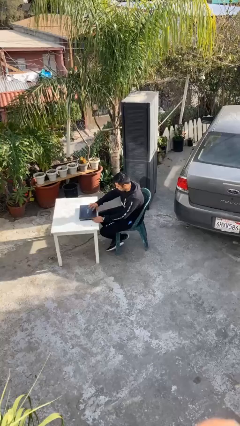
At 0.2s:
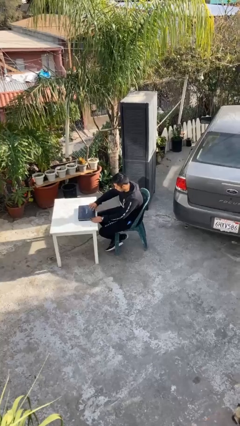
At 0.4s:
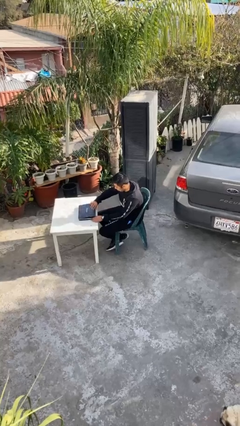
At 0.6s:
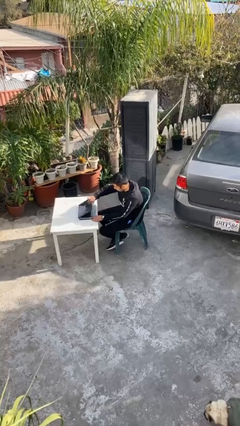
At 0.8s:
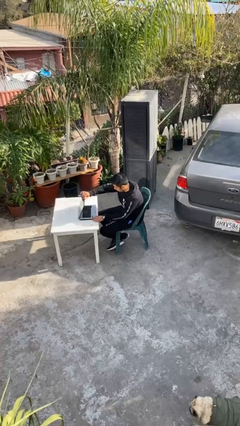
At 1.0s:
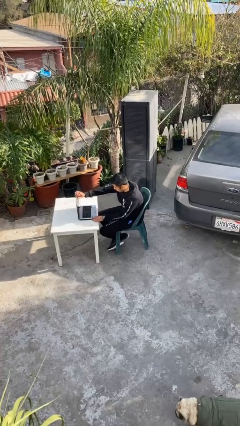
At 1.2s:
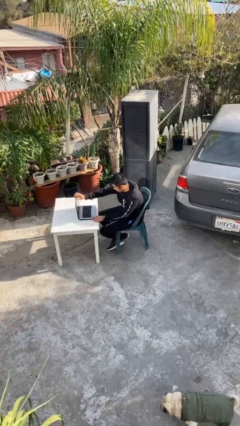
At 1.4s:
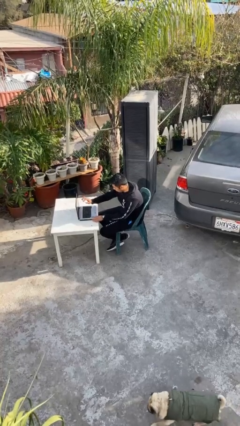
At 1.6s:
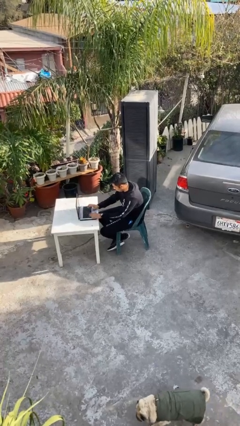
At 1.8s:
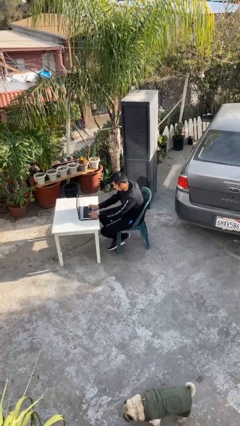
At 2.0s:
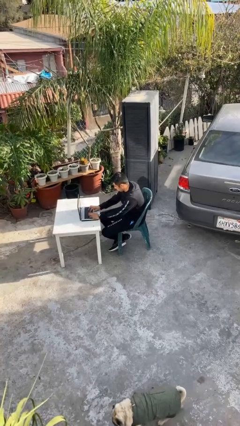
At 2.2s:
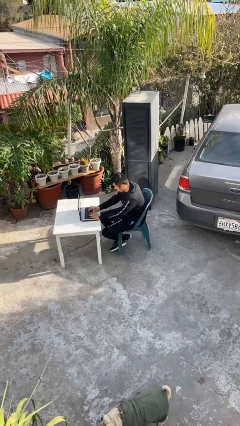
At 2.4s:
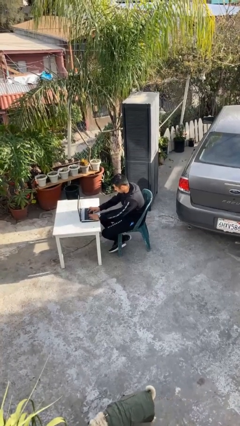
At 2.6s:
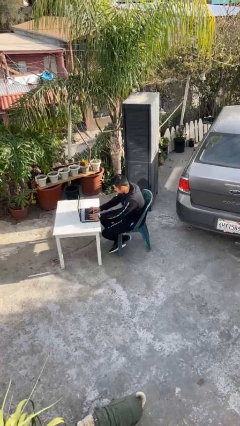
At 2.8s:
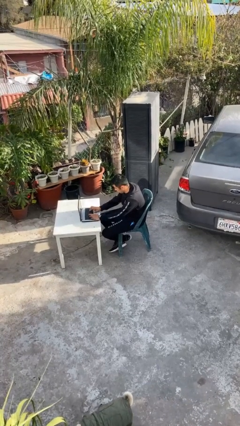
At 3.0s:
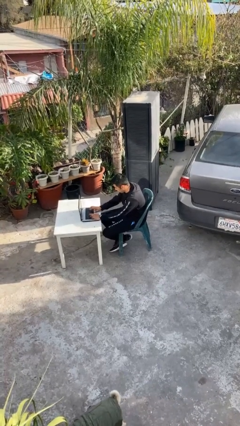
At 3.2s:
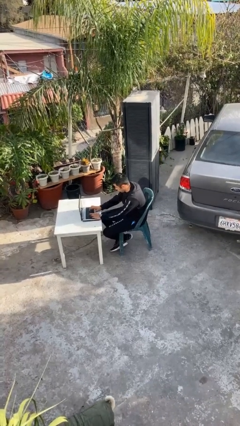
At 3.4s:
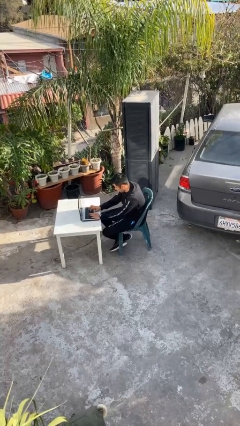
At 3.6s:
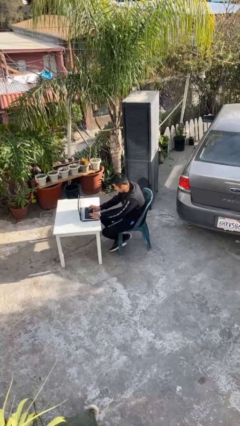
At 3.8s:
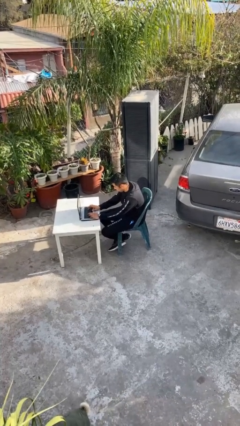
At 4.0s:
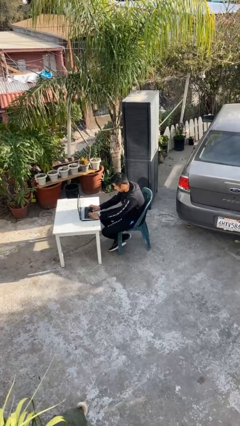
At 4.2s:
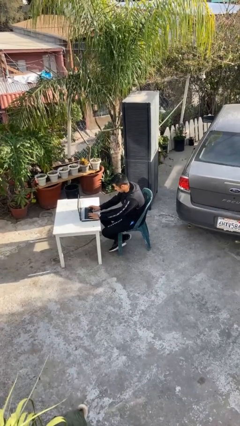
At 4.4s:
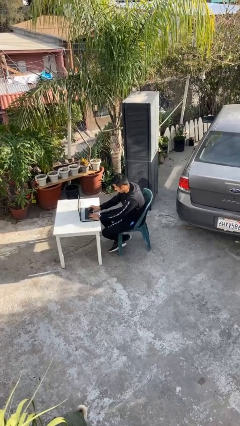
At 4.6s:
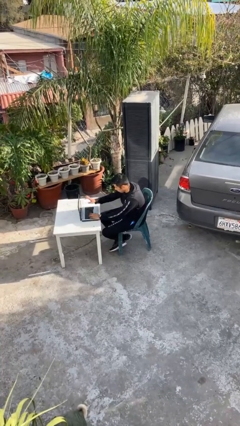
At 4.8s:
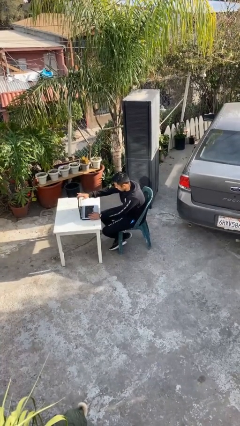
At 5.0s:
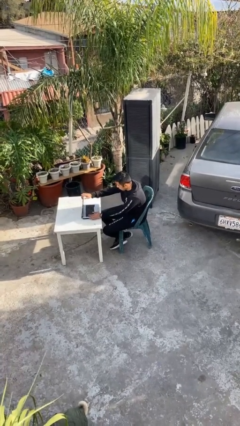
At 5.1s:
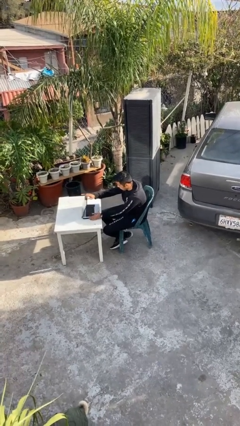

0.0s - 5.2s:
person interacts with laptop

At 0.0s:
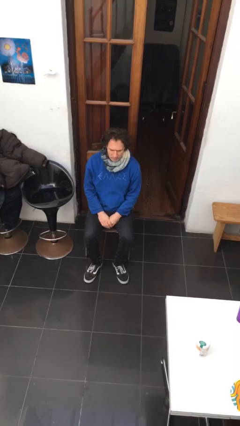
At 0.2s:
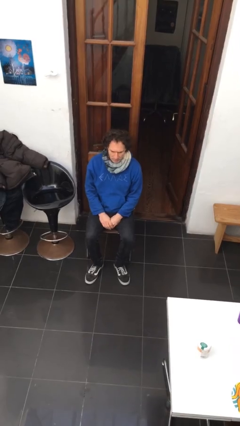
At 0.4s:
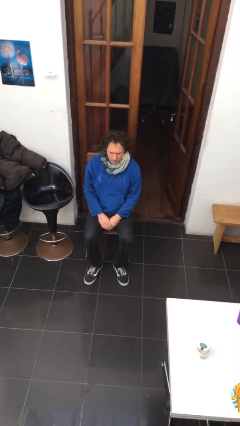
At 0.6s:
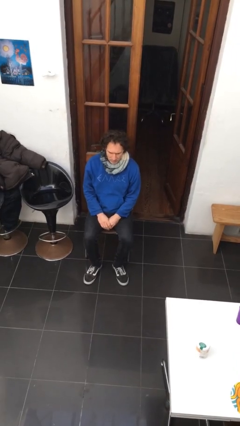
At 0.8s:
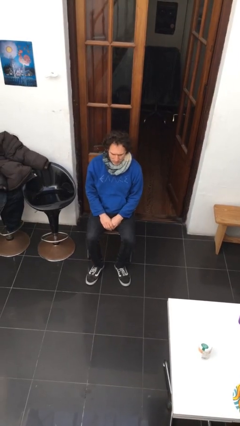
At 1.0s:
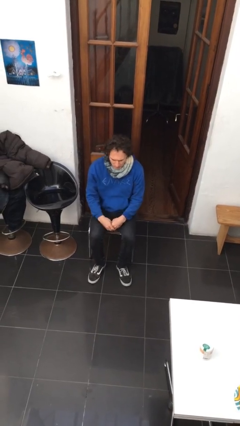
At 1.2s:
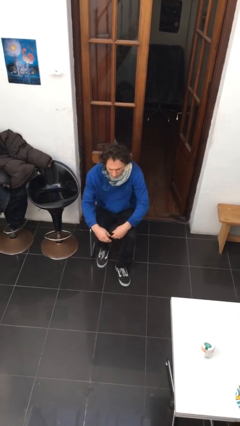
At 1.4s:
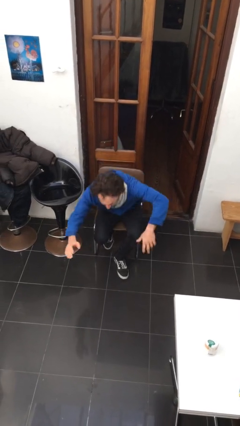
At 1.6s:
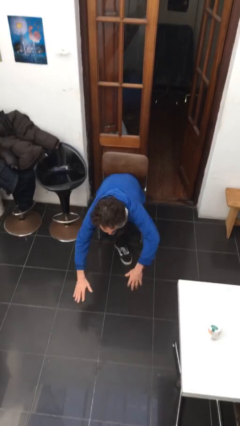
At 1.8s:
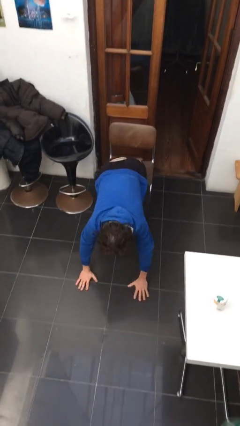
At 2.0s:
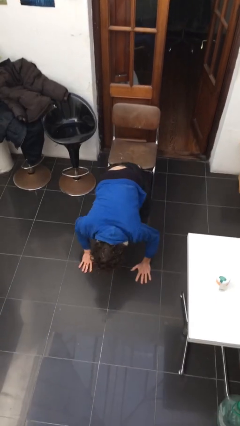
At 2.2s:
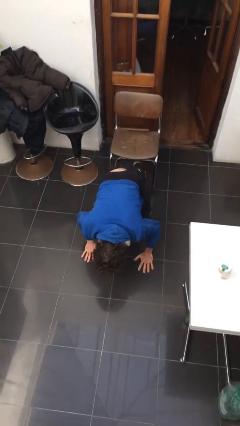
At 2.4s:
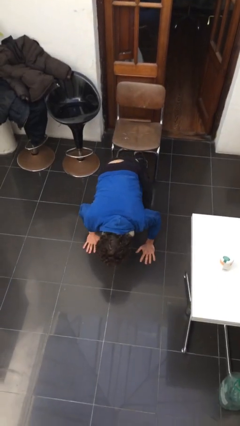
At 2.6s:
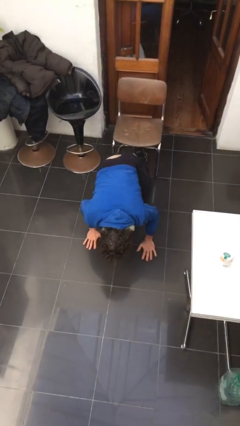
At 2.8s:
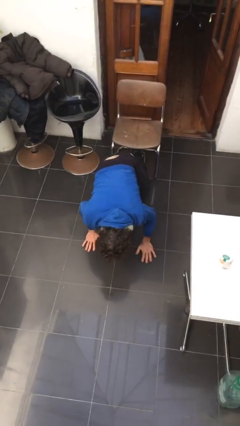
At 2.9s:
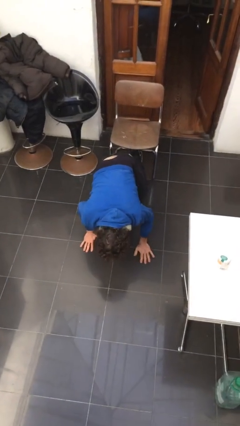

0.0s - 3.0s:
person falls from chair

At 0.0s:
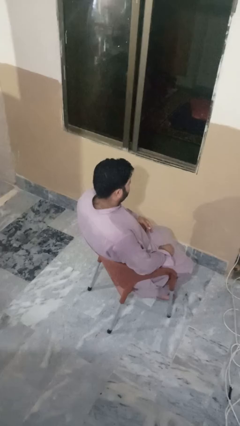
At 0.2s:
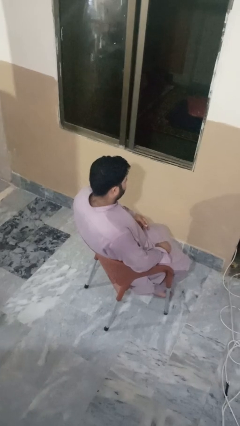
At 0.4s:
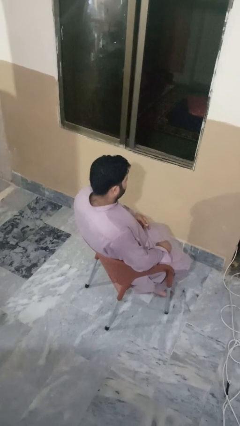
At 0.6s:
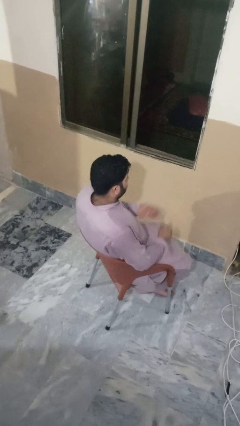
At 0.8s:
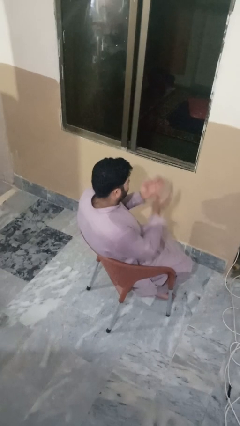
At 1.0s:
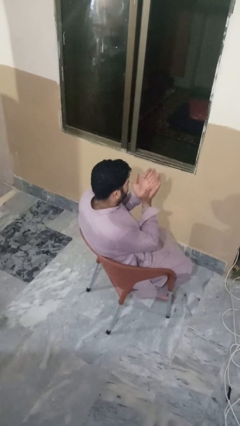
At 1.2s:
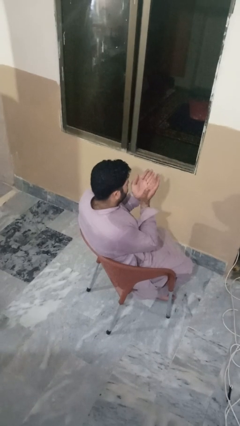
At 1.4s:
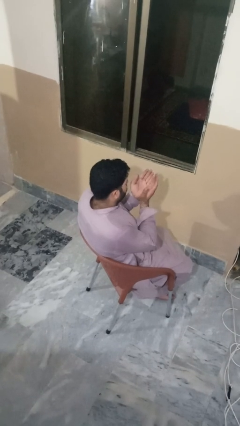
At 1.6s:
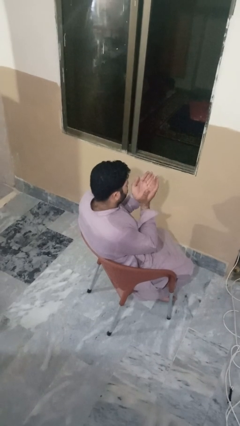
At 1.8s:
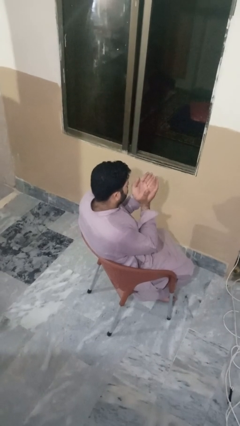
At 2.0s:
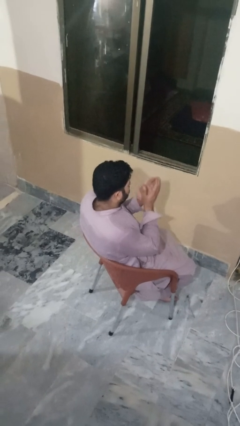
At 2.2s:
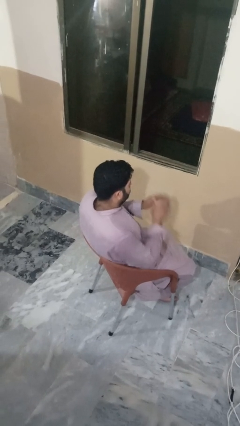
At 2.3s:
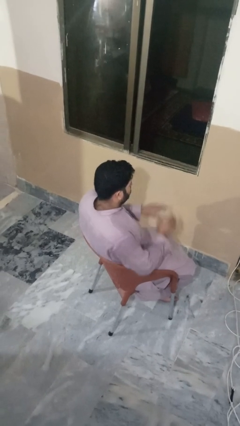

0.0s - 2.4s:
person prays

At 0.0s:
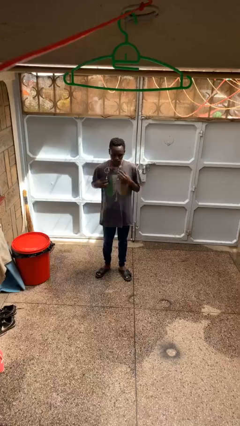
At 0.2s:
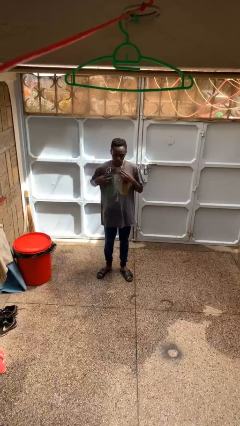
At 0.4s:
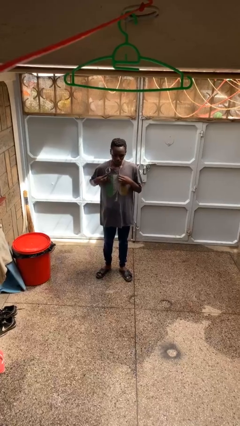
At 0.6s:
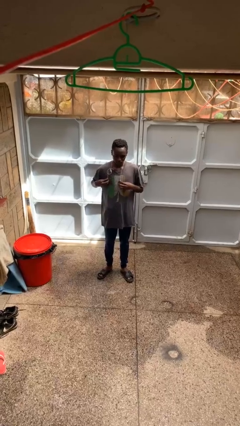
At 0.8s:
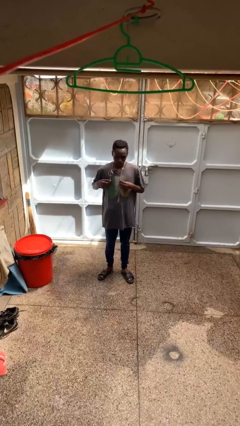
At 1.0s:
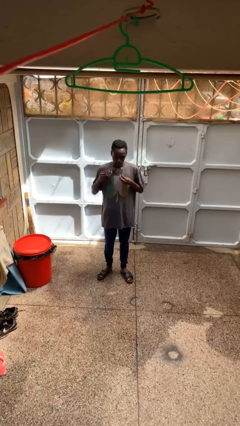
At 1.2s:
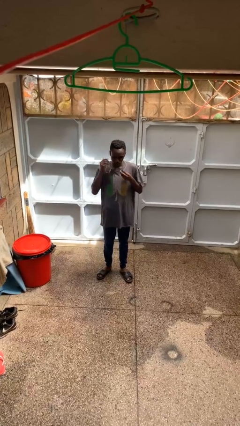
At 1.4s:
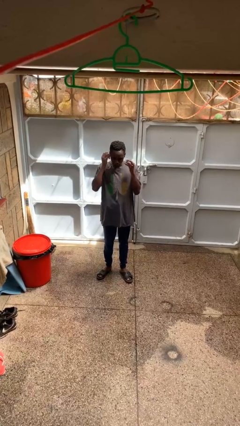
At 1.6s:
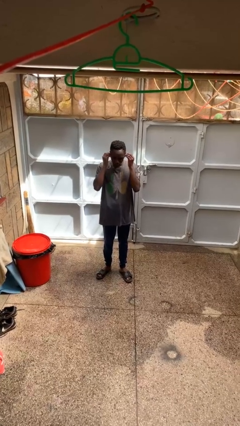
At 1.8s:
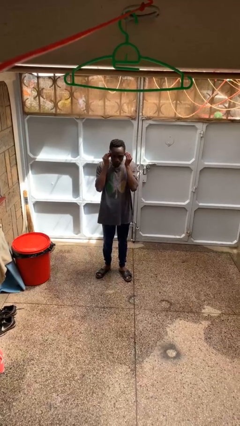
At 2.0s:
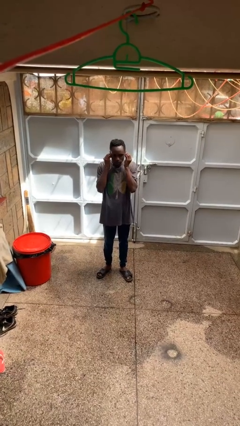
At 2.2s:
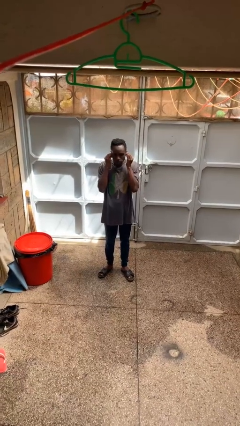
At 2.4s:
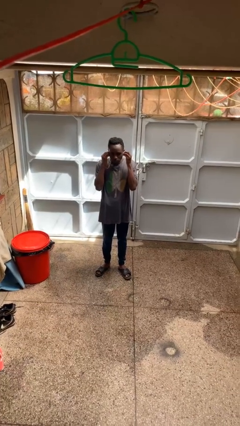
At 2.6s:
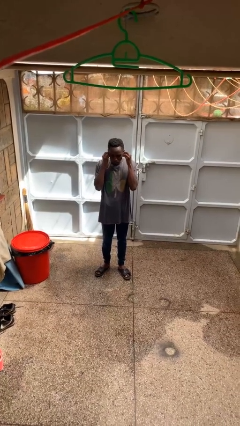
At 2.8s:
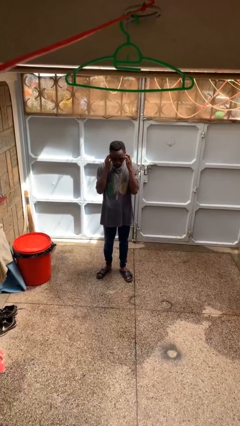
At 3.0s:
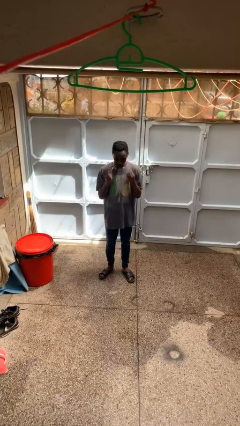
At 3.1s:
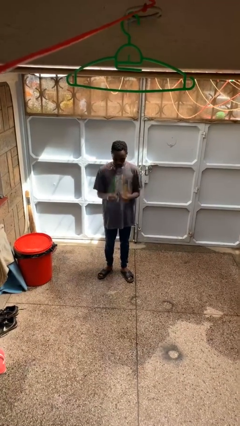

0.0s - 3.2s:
person puts on headphones

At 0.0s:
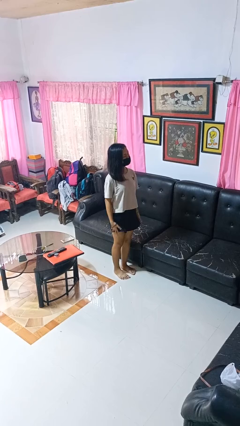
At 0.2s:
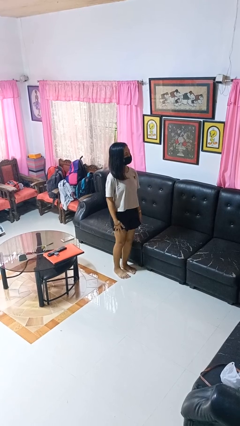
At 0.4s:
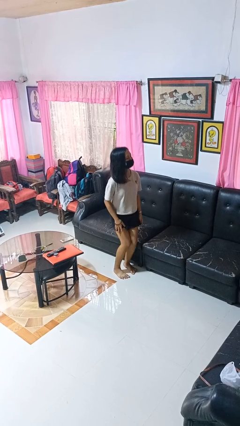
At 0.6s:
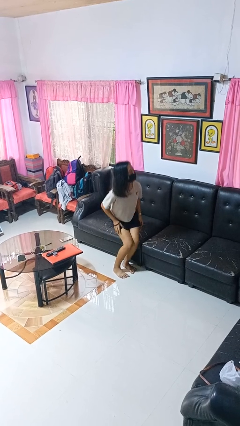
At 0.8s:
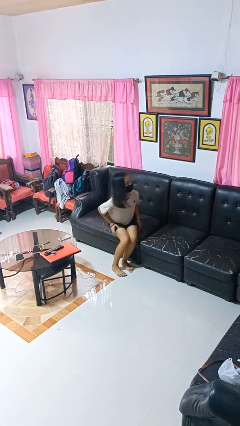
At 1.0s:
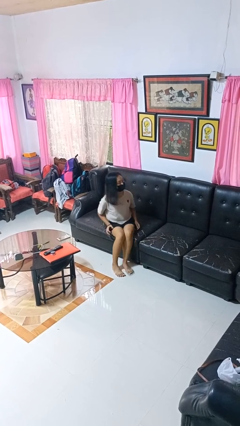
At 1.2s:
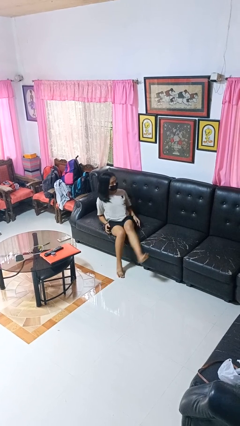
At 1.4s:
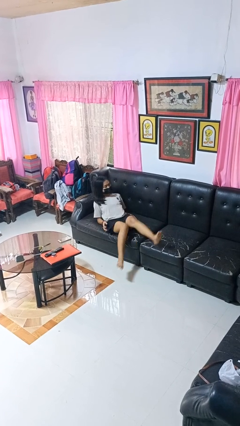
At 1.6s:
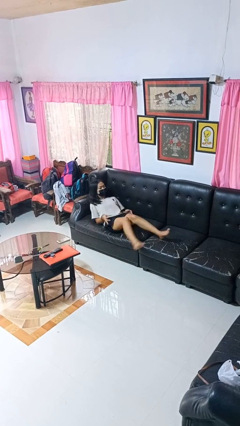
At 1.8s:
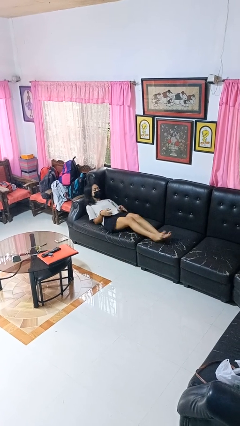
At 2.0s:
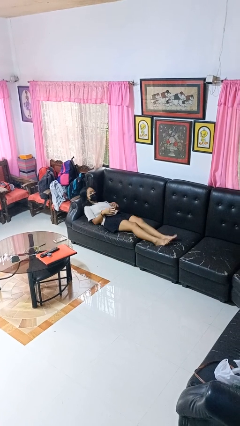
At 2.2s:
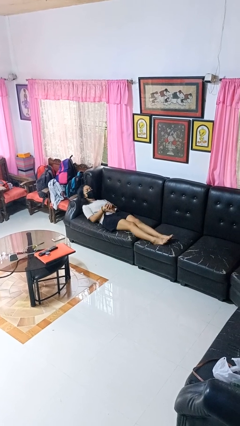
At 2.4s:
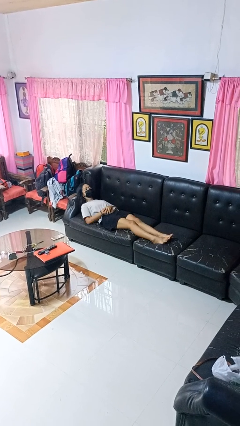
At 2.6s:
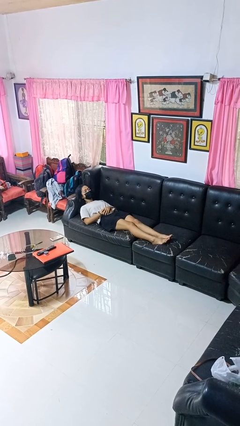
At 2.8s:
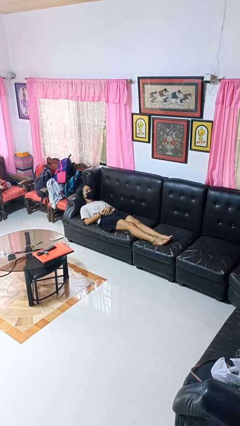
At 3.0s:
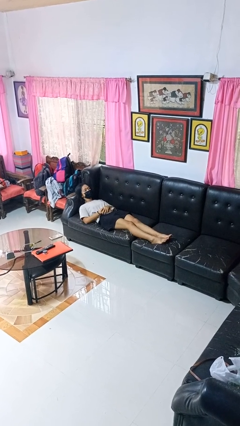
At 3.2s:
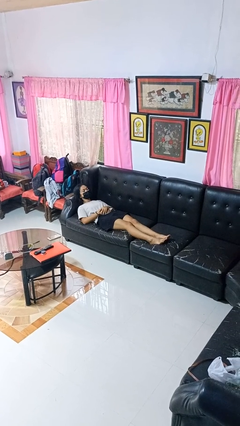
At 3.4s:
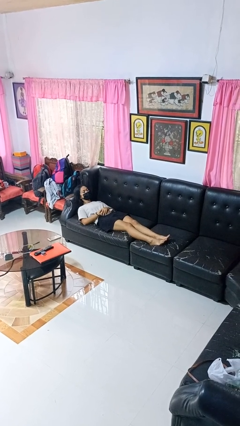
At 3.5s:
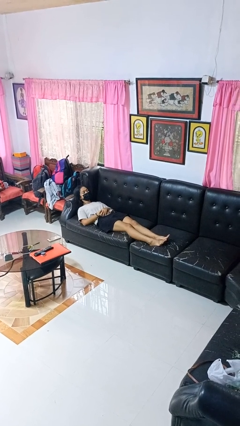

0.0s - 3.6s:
person lies down on couch
